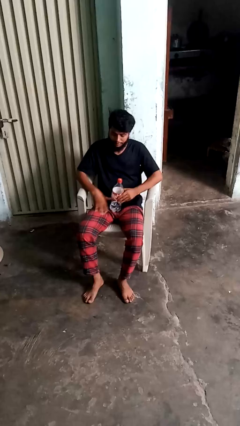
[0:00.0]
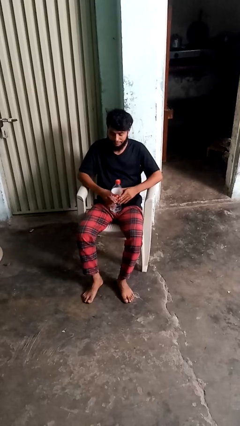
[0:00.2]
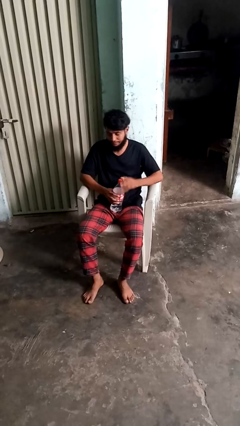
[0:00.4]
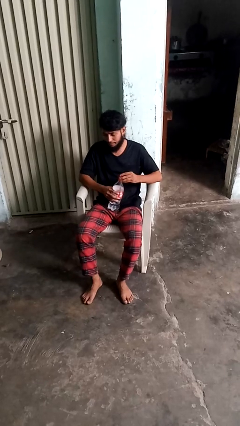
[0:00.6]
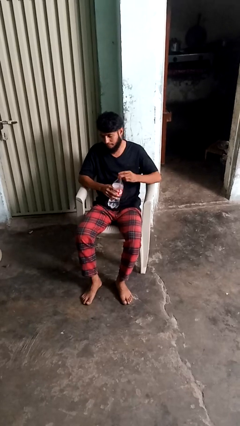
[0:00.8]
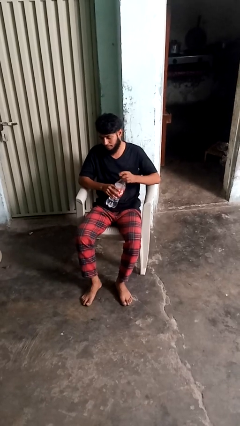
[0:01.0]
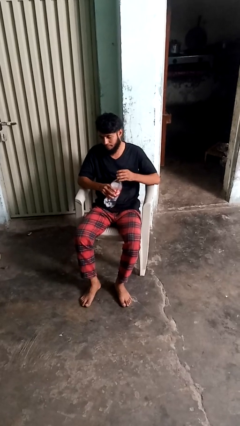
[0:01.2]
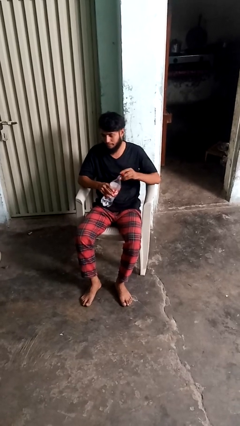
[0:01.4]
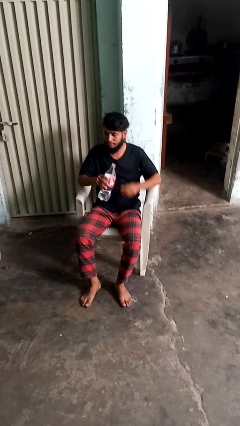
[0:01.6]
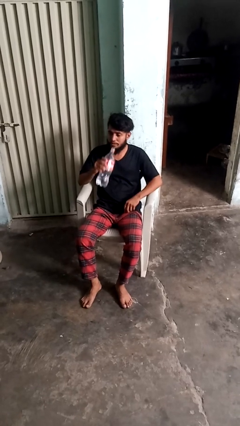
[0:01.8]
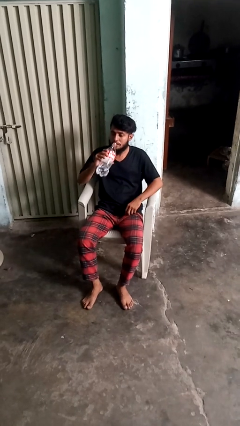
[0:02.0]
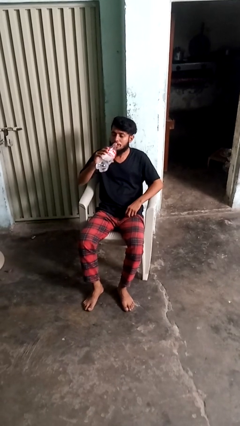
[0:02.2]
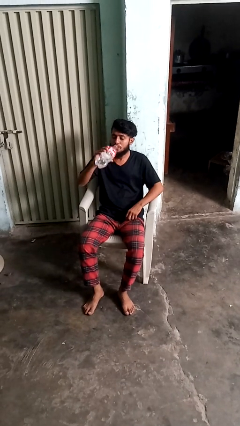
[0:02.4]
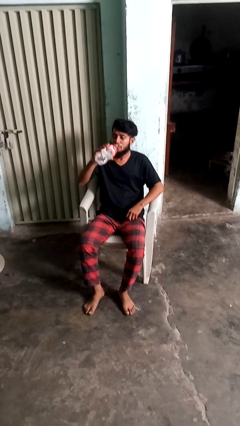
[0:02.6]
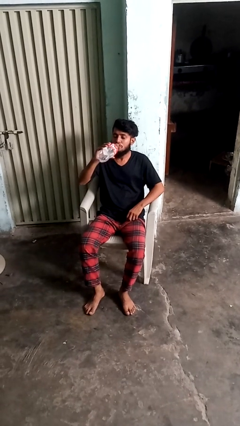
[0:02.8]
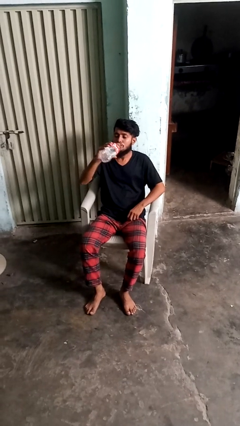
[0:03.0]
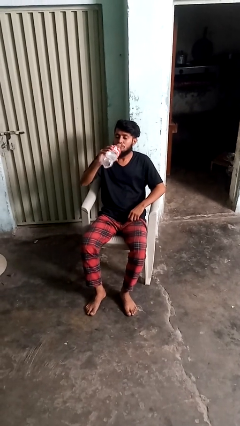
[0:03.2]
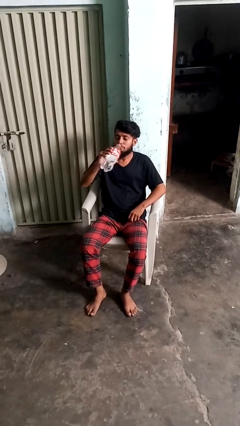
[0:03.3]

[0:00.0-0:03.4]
person drinks from bottle

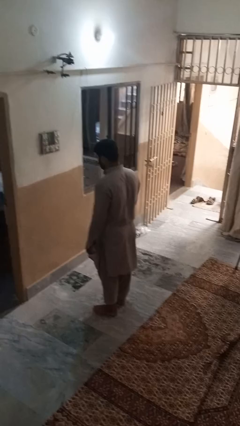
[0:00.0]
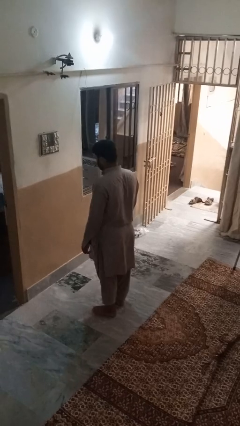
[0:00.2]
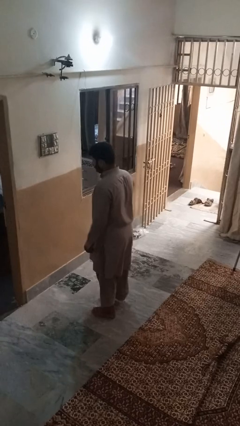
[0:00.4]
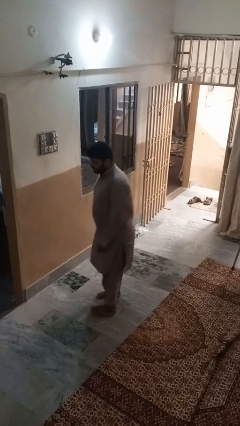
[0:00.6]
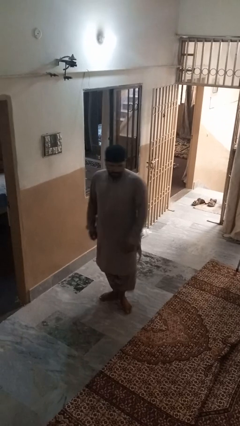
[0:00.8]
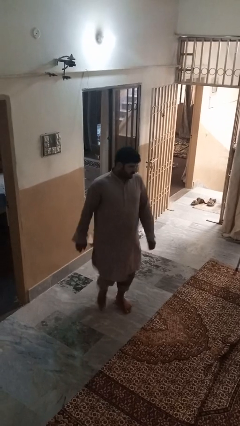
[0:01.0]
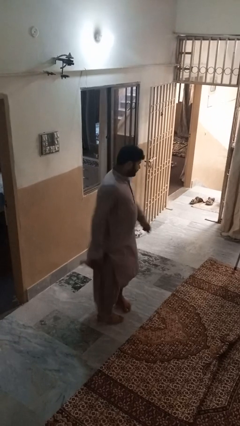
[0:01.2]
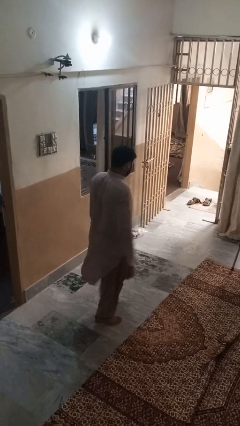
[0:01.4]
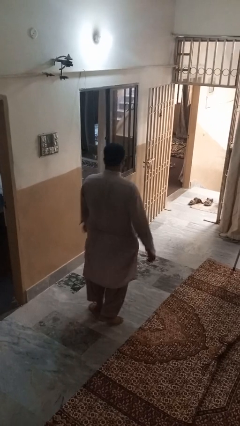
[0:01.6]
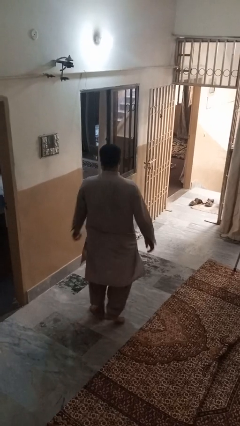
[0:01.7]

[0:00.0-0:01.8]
person twirls

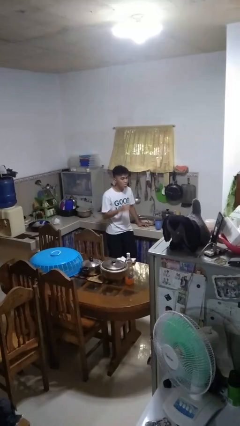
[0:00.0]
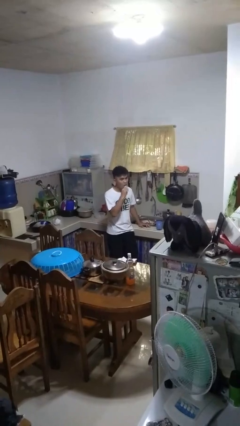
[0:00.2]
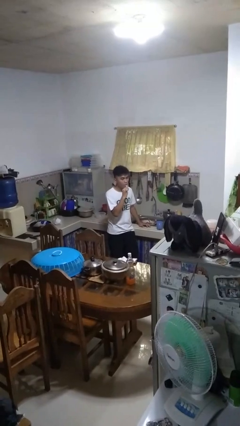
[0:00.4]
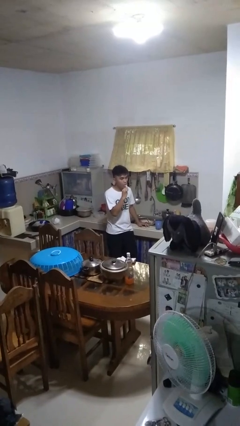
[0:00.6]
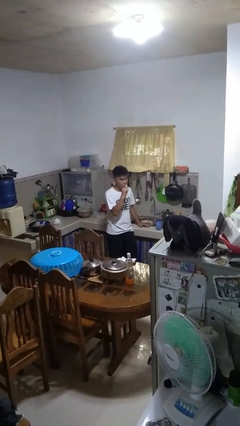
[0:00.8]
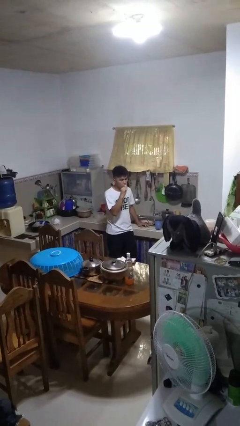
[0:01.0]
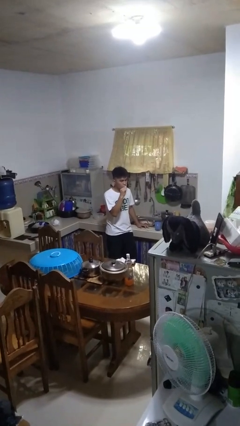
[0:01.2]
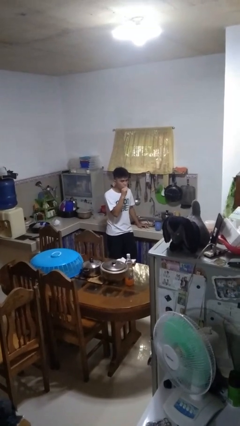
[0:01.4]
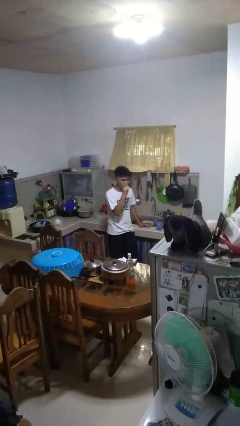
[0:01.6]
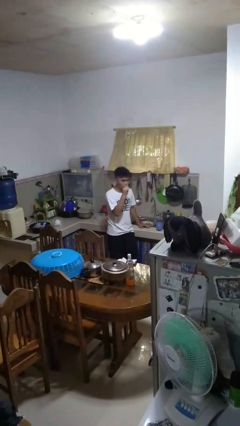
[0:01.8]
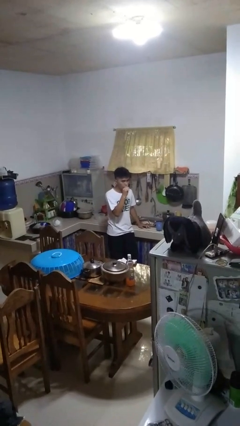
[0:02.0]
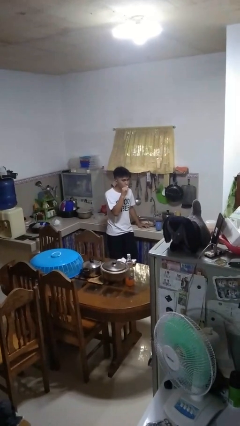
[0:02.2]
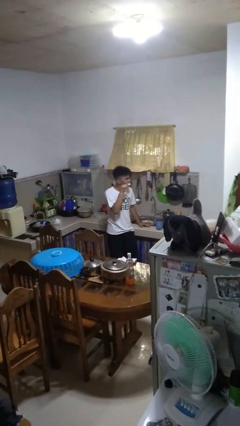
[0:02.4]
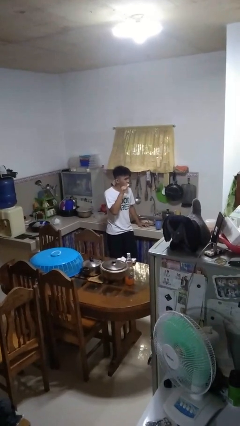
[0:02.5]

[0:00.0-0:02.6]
person brushes teeth

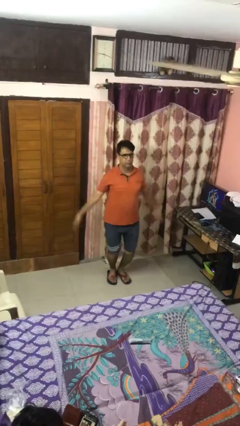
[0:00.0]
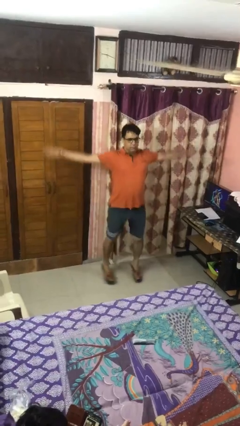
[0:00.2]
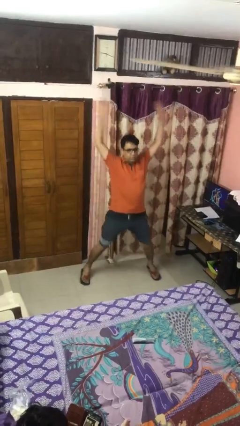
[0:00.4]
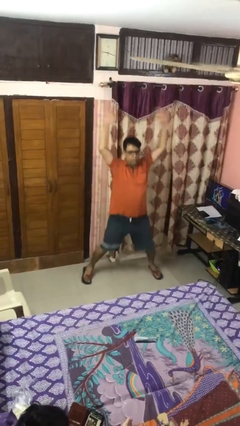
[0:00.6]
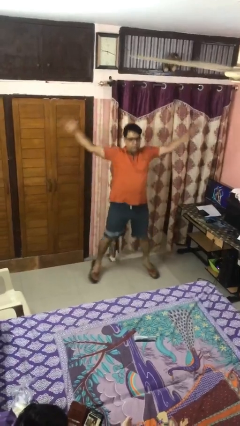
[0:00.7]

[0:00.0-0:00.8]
person exercises with jumping jacks

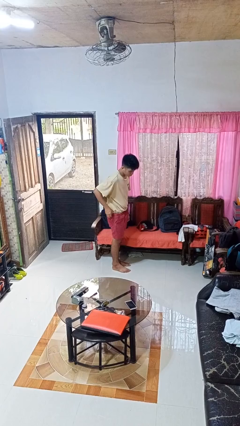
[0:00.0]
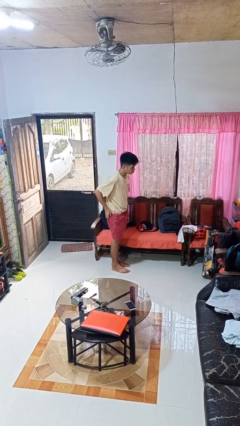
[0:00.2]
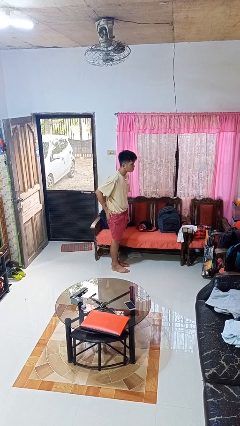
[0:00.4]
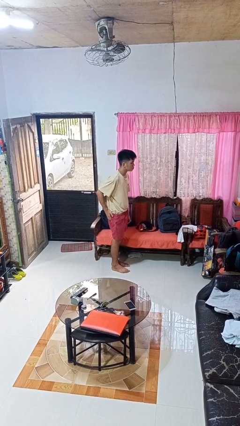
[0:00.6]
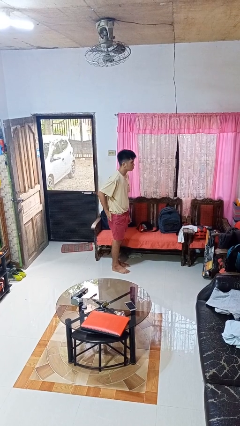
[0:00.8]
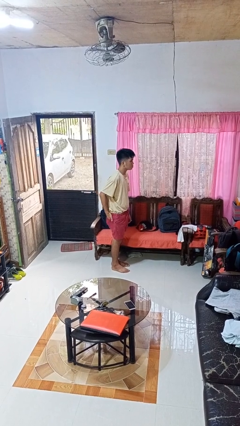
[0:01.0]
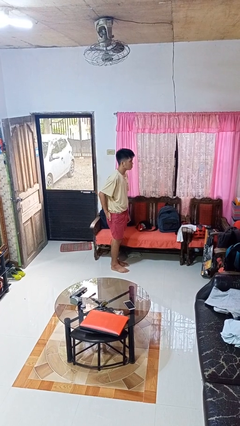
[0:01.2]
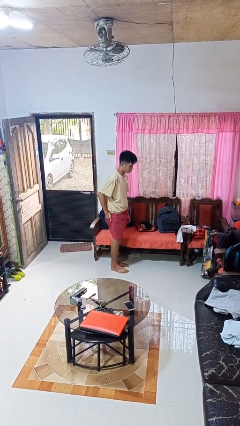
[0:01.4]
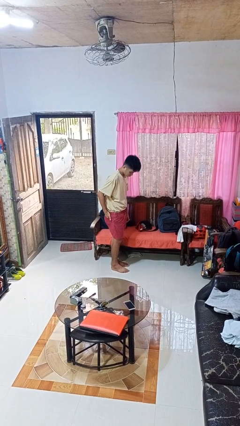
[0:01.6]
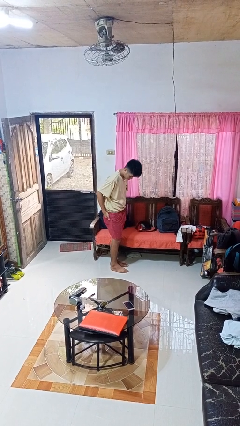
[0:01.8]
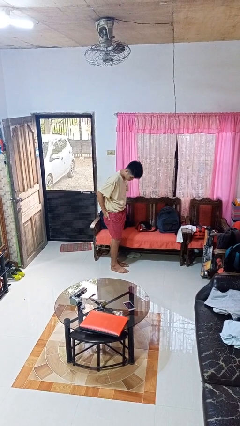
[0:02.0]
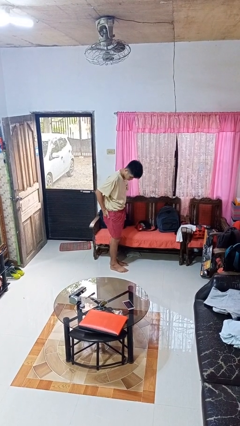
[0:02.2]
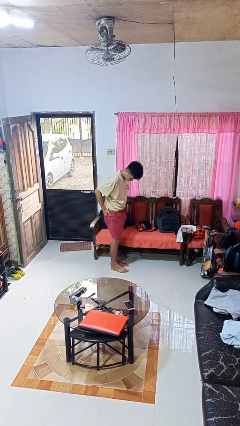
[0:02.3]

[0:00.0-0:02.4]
person puts hands in back pockets

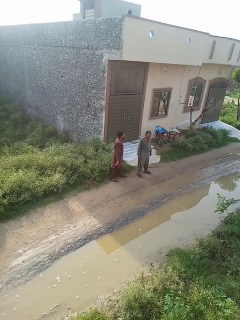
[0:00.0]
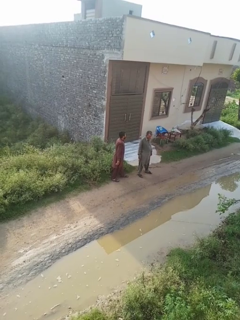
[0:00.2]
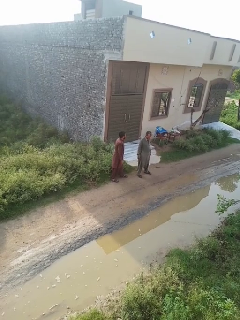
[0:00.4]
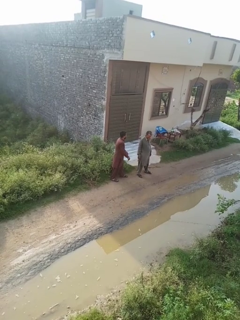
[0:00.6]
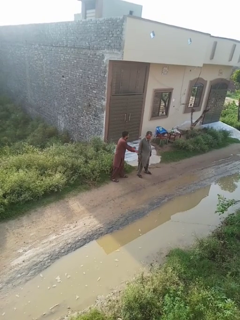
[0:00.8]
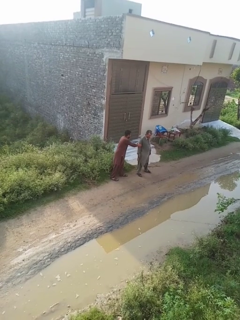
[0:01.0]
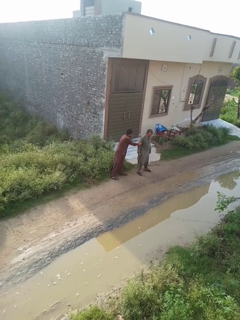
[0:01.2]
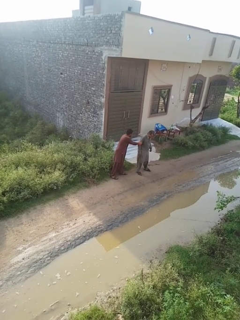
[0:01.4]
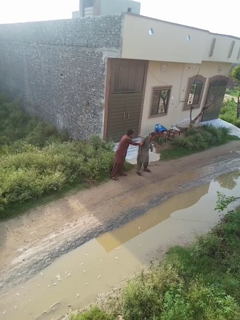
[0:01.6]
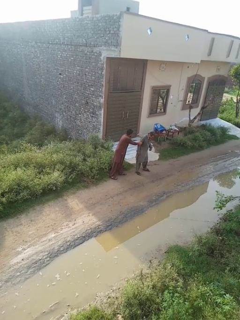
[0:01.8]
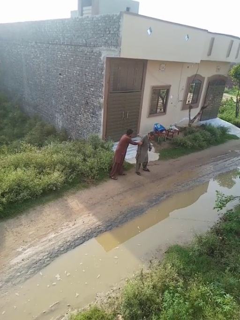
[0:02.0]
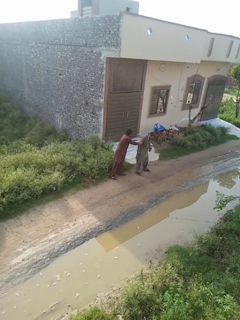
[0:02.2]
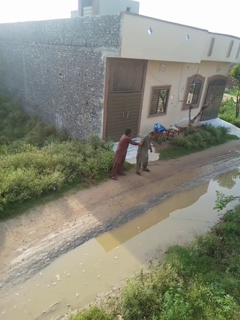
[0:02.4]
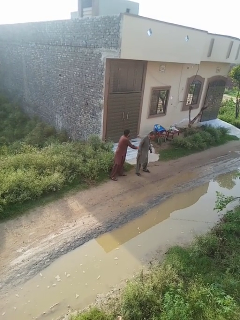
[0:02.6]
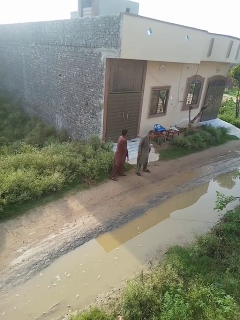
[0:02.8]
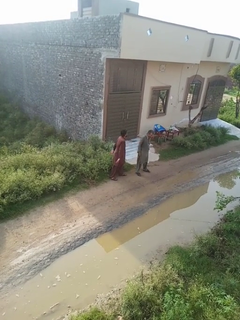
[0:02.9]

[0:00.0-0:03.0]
person grabs person by bicep

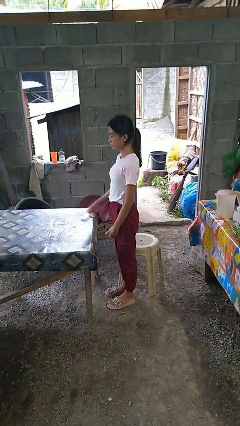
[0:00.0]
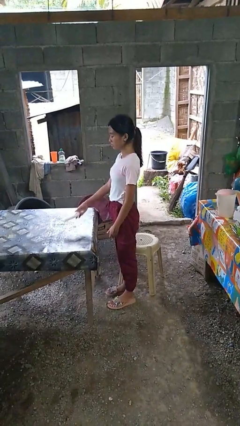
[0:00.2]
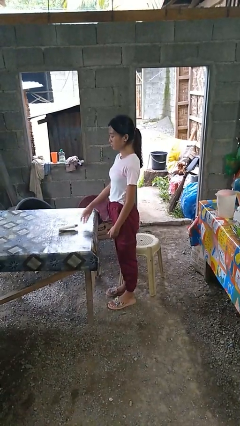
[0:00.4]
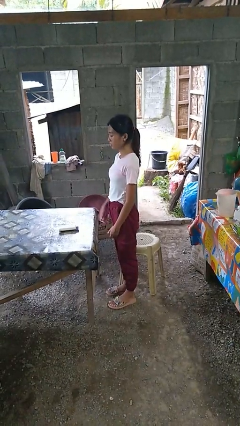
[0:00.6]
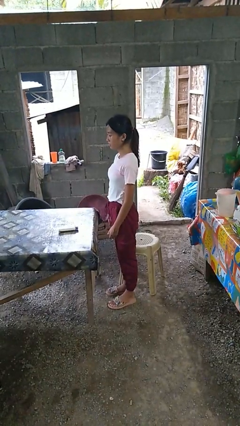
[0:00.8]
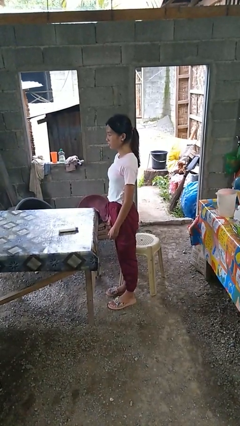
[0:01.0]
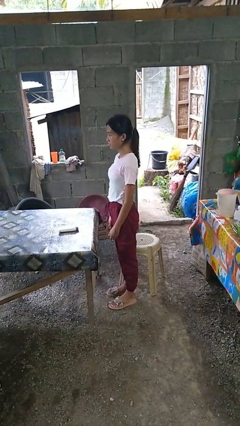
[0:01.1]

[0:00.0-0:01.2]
person throws object on table

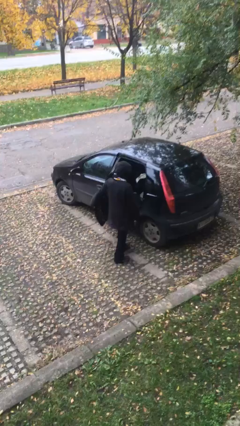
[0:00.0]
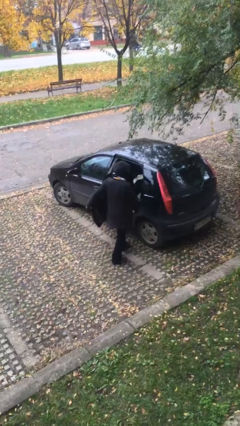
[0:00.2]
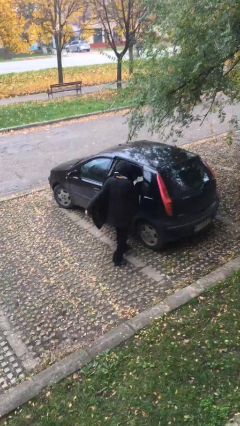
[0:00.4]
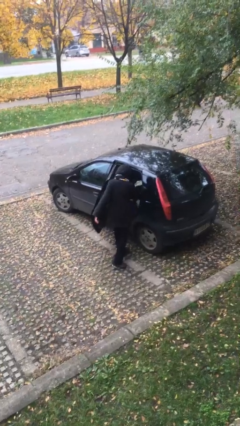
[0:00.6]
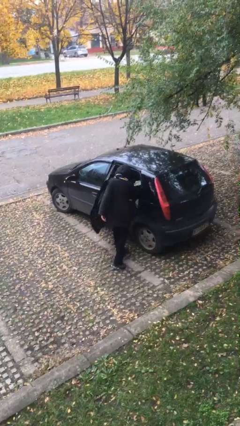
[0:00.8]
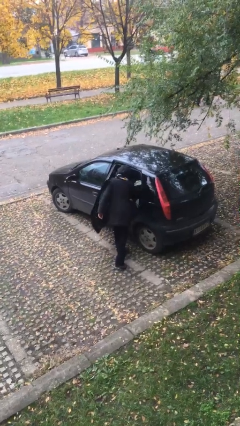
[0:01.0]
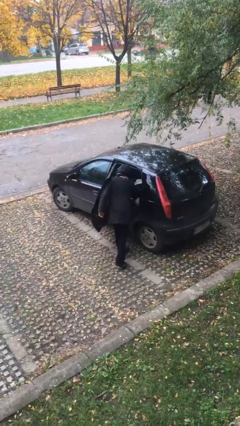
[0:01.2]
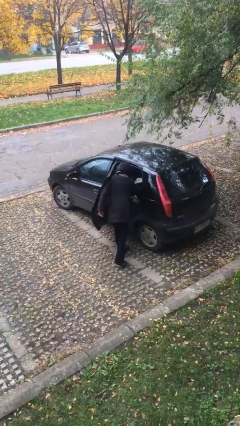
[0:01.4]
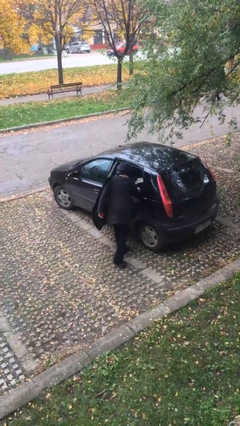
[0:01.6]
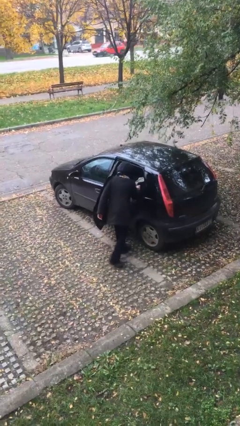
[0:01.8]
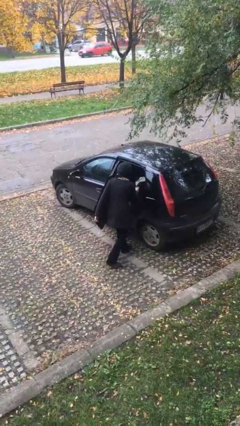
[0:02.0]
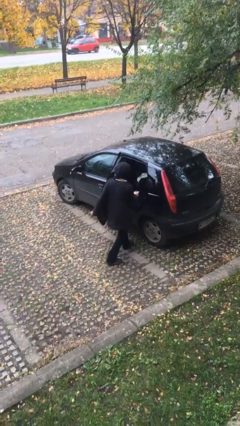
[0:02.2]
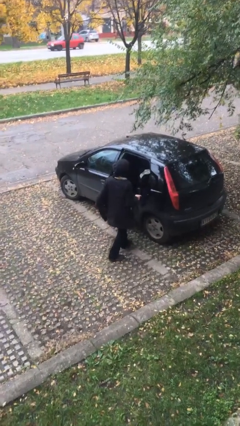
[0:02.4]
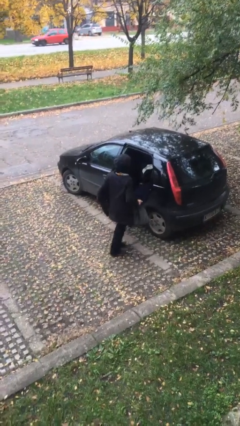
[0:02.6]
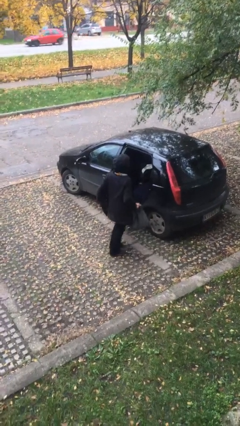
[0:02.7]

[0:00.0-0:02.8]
person unloads car
